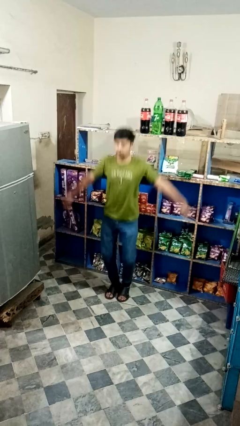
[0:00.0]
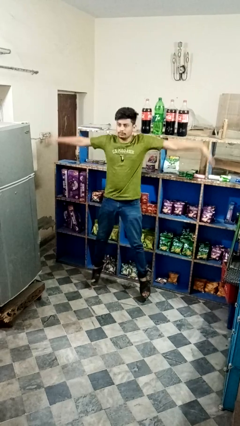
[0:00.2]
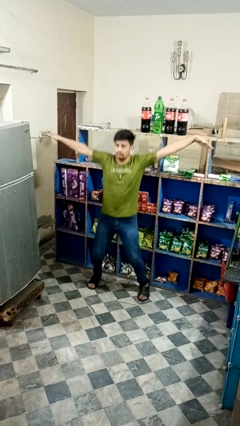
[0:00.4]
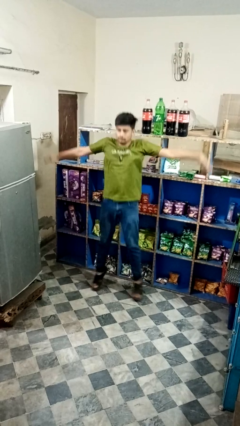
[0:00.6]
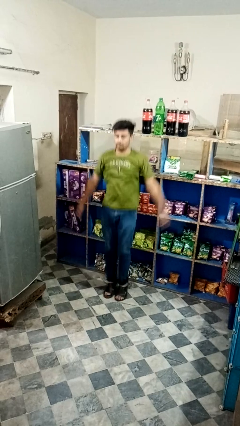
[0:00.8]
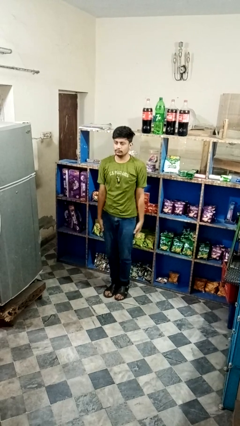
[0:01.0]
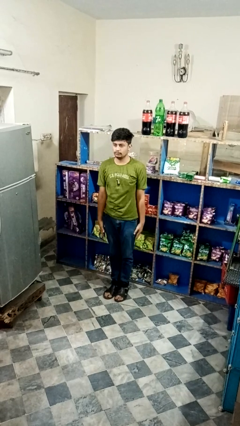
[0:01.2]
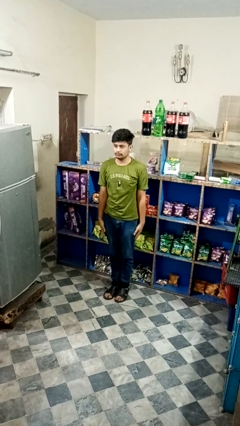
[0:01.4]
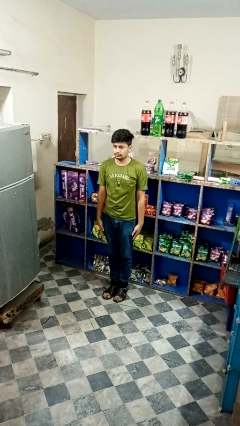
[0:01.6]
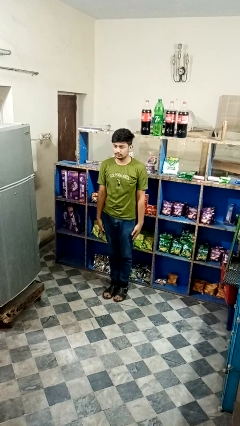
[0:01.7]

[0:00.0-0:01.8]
person exercises with jumping jacks

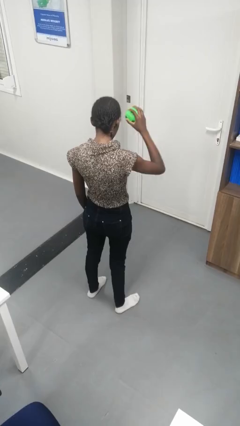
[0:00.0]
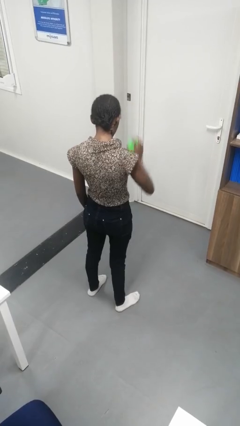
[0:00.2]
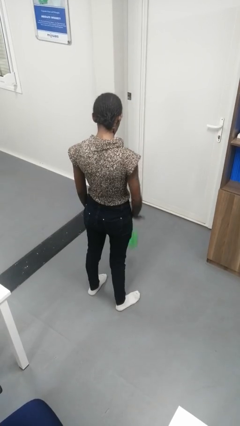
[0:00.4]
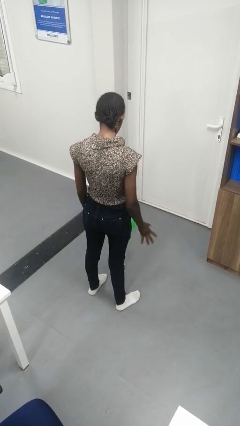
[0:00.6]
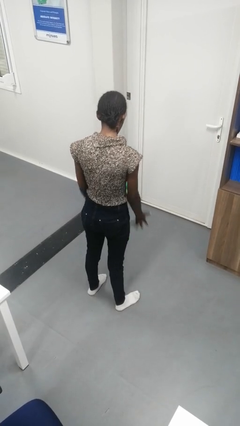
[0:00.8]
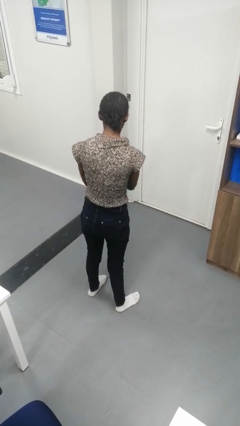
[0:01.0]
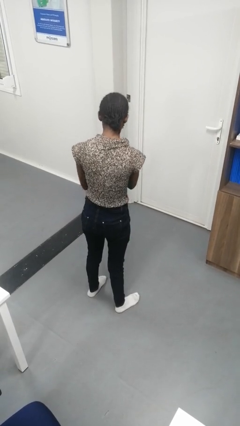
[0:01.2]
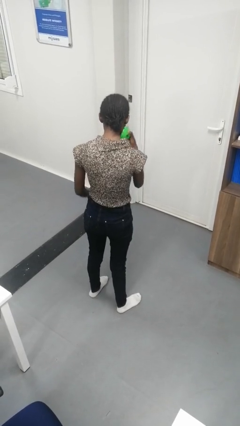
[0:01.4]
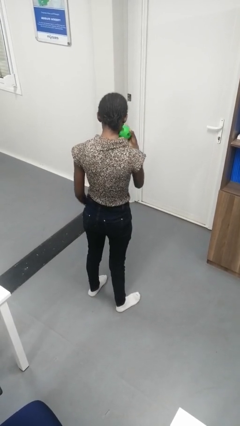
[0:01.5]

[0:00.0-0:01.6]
person bounces ball on floor

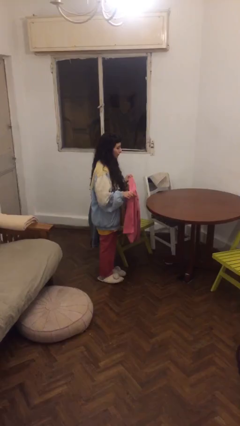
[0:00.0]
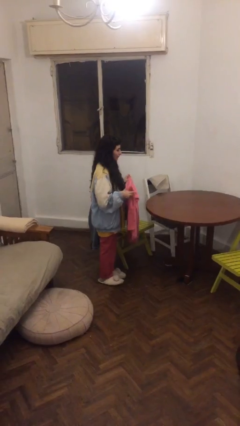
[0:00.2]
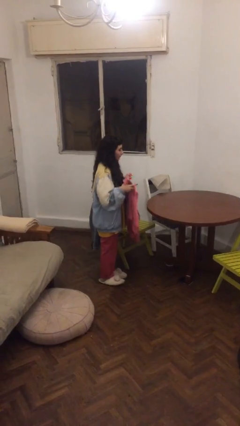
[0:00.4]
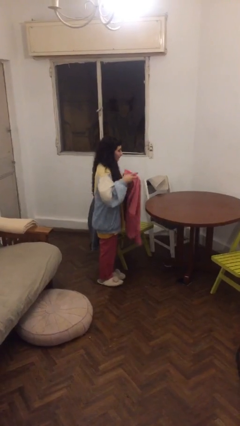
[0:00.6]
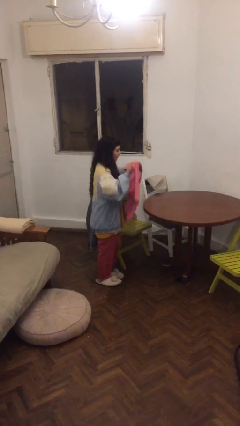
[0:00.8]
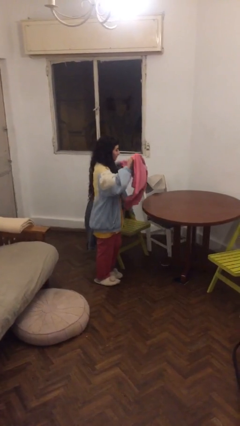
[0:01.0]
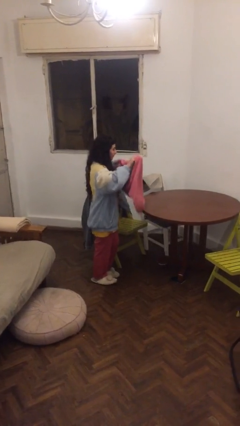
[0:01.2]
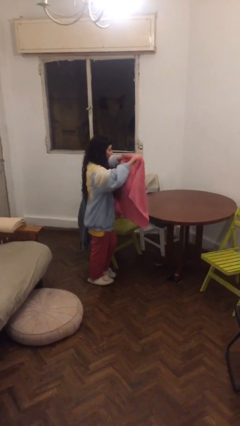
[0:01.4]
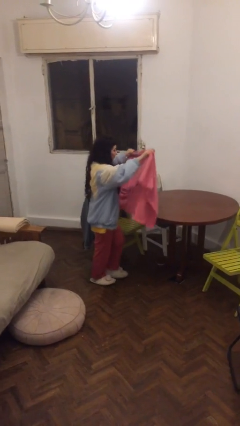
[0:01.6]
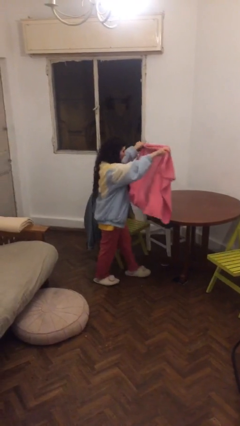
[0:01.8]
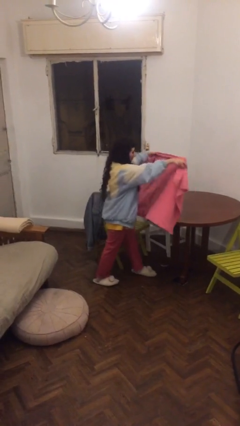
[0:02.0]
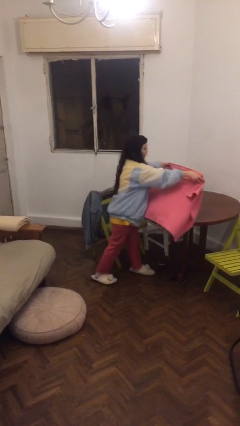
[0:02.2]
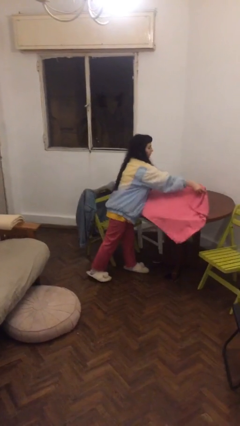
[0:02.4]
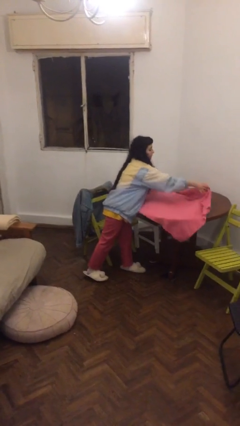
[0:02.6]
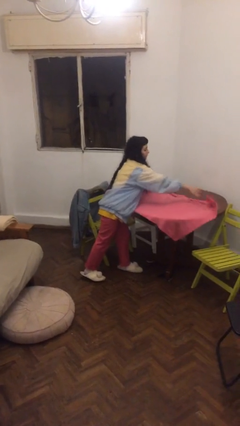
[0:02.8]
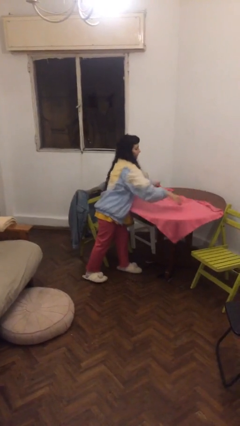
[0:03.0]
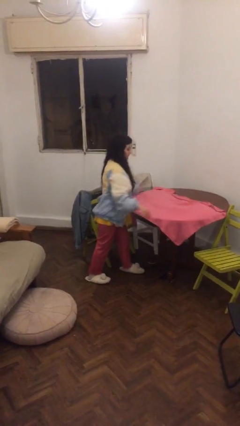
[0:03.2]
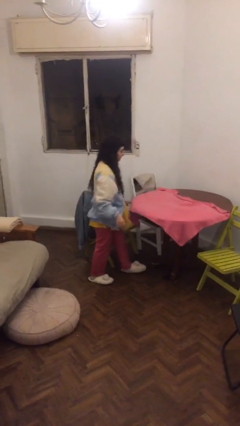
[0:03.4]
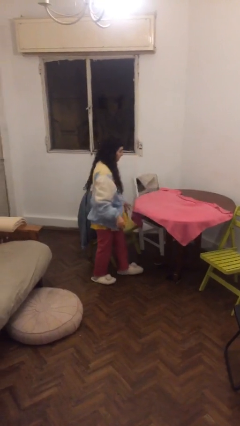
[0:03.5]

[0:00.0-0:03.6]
person spreads tablecloth

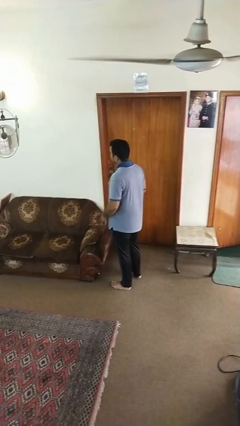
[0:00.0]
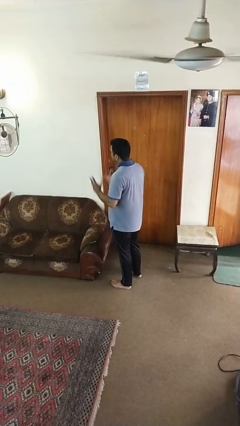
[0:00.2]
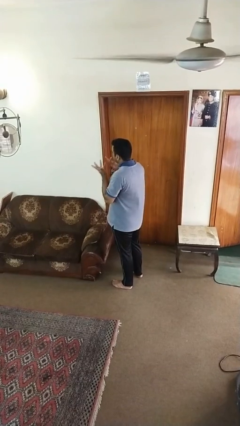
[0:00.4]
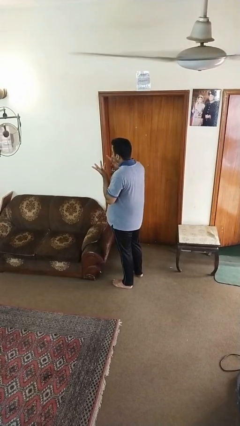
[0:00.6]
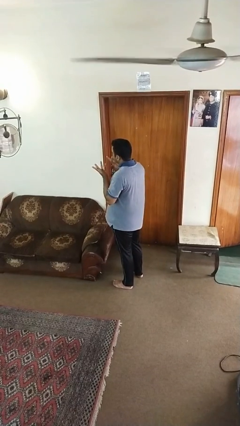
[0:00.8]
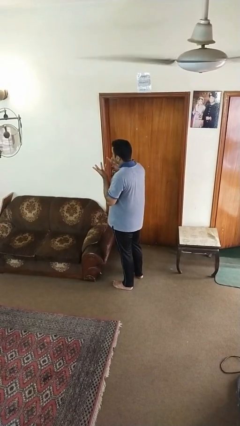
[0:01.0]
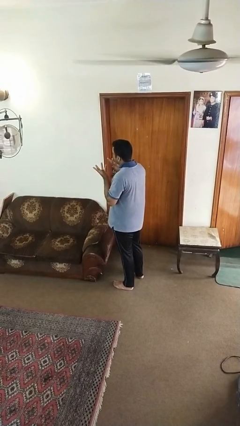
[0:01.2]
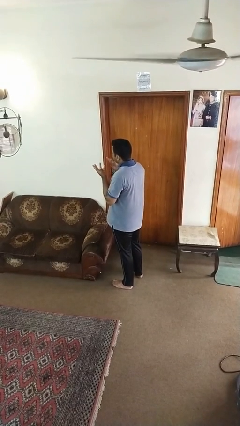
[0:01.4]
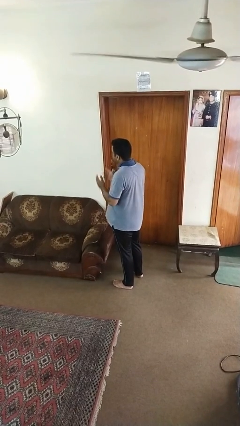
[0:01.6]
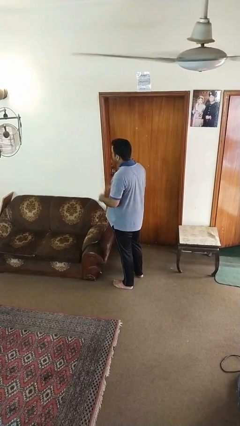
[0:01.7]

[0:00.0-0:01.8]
person shrugs

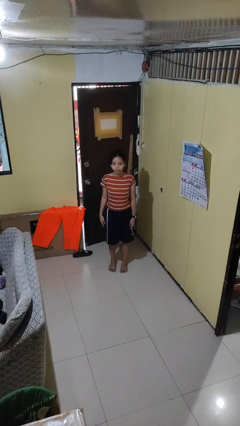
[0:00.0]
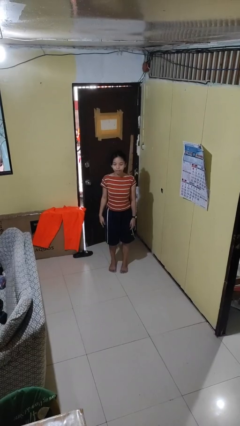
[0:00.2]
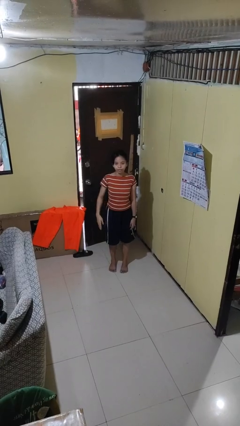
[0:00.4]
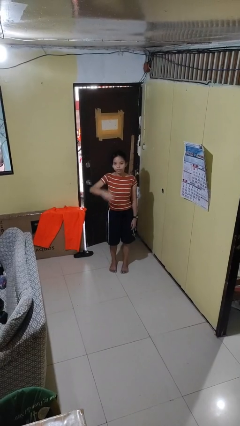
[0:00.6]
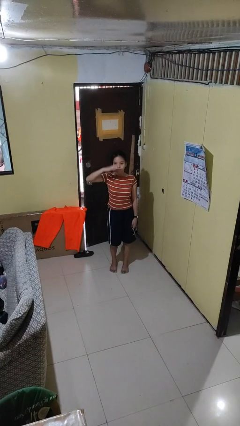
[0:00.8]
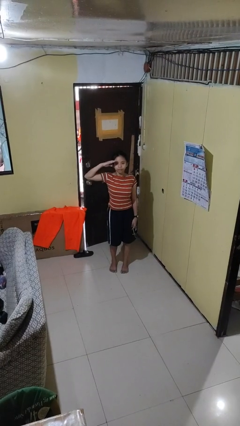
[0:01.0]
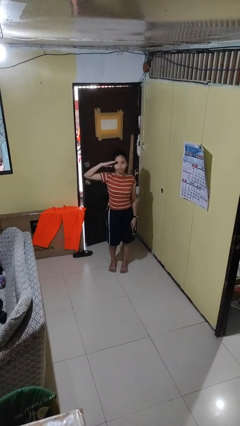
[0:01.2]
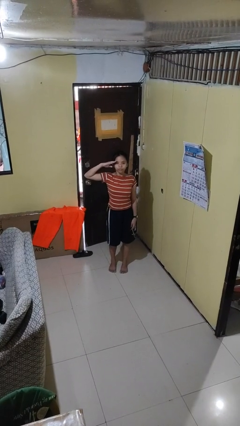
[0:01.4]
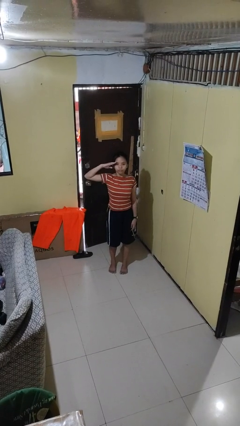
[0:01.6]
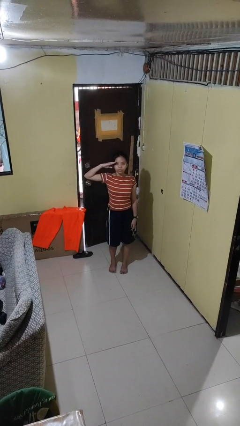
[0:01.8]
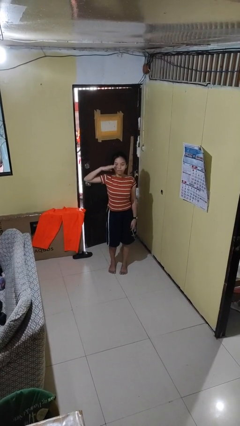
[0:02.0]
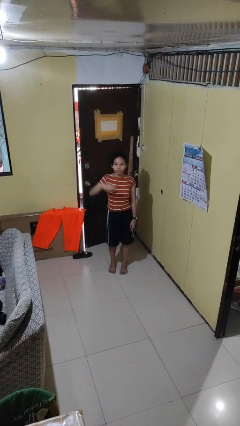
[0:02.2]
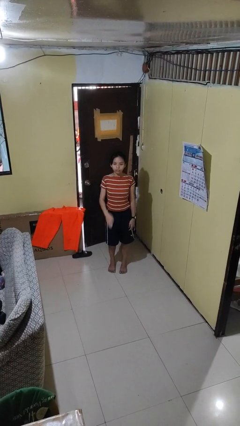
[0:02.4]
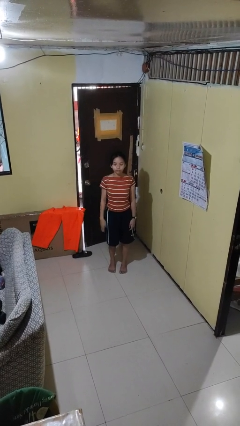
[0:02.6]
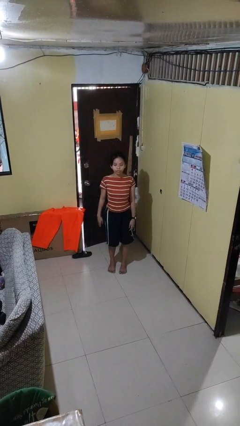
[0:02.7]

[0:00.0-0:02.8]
person salutes

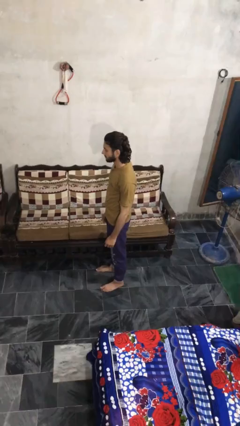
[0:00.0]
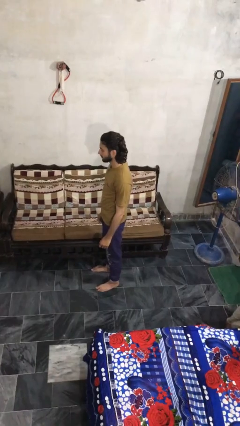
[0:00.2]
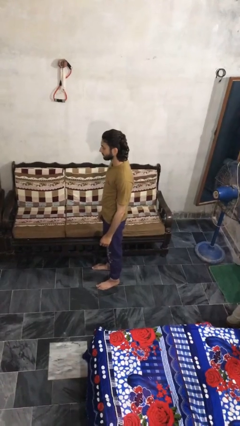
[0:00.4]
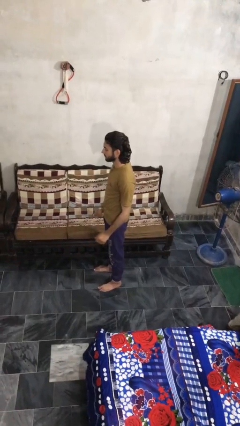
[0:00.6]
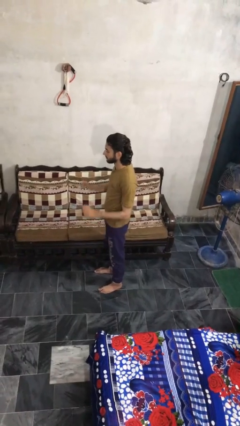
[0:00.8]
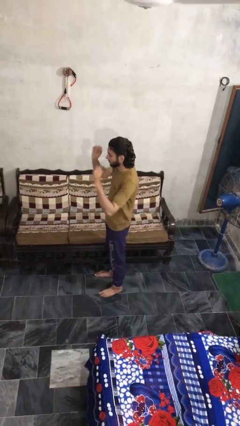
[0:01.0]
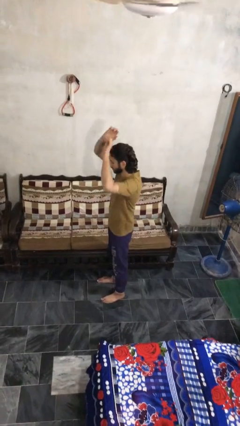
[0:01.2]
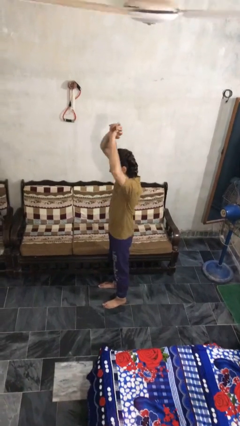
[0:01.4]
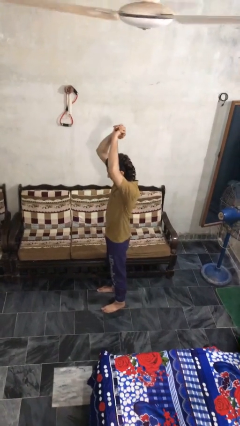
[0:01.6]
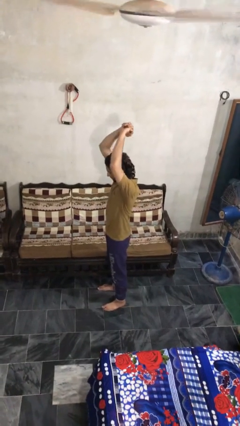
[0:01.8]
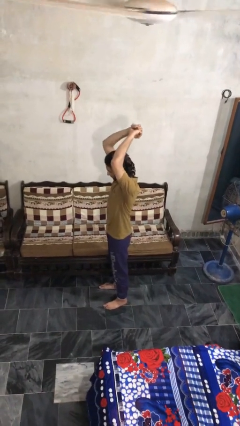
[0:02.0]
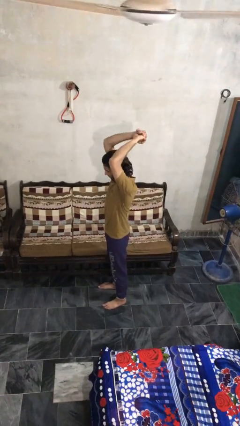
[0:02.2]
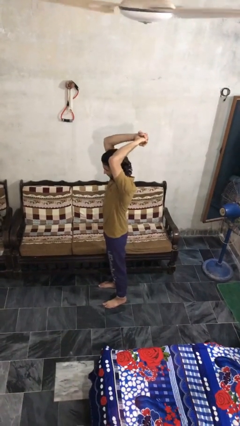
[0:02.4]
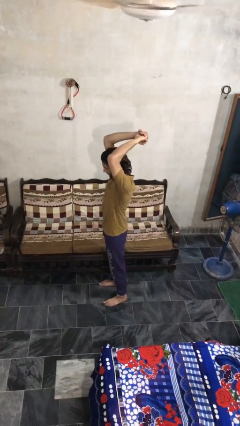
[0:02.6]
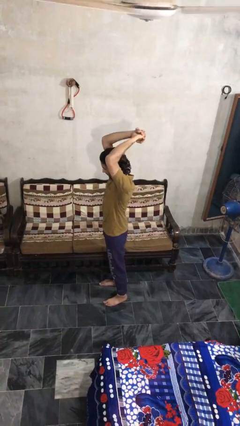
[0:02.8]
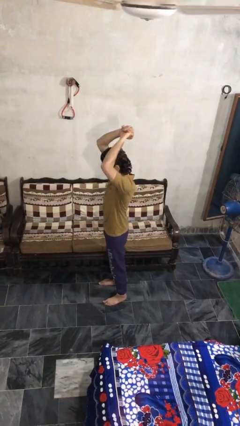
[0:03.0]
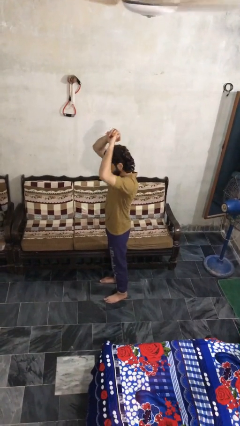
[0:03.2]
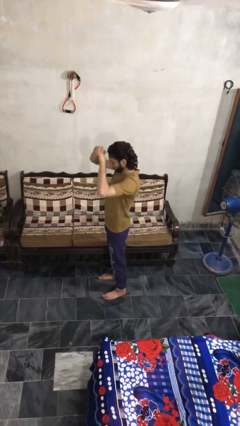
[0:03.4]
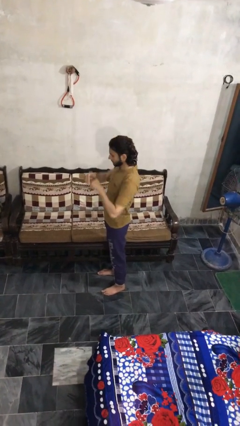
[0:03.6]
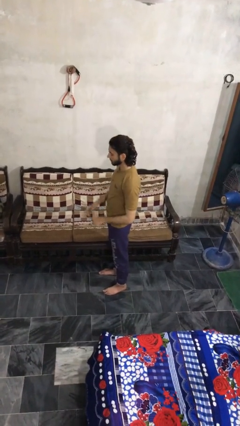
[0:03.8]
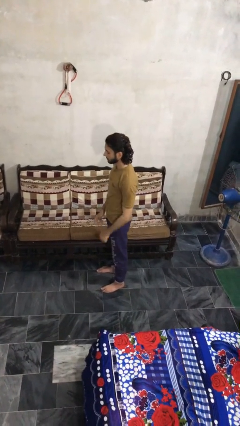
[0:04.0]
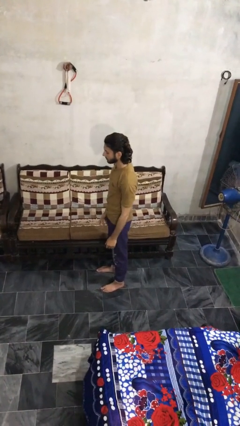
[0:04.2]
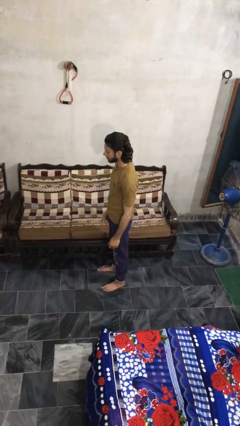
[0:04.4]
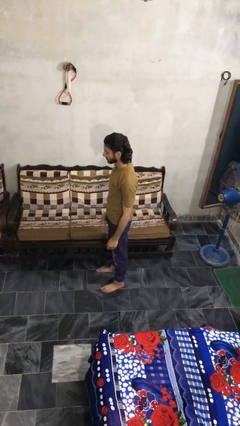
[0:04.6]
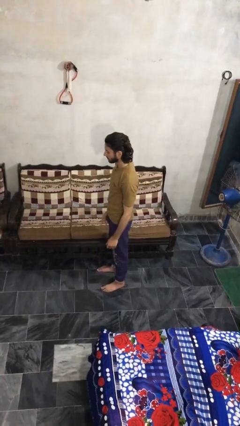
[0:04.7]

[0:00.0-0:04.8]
person stretches arms over head

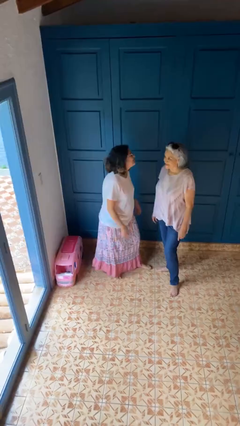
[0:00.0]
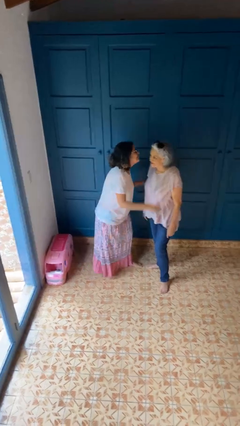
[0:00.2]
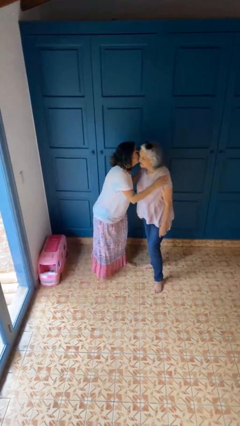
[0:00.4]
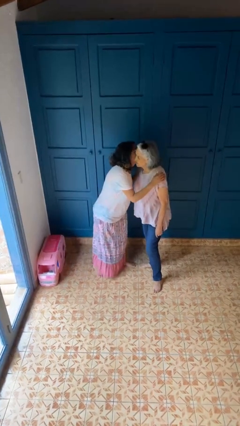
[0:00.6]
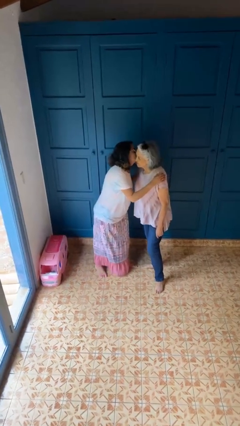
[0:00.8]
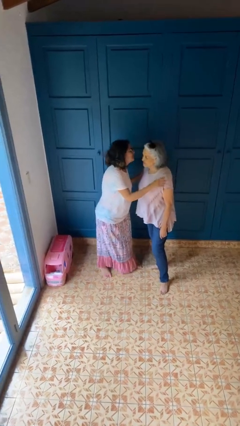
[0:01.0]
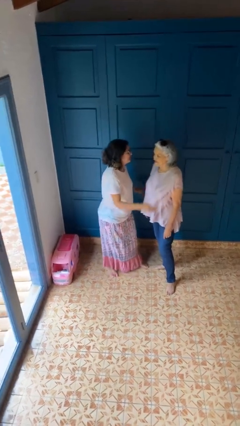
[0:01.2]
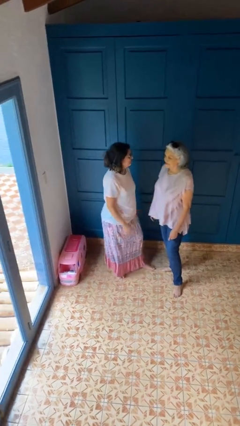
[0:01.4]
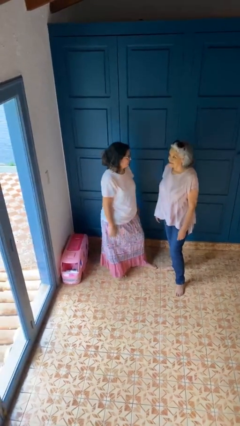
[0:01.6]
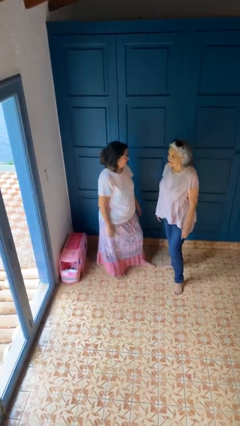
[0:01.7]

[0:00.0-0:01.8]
person kisses cheek of person
